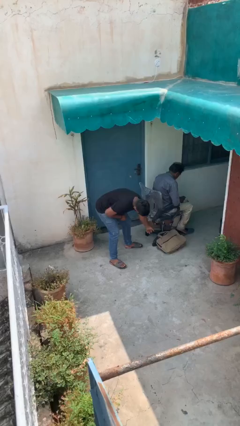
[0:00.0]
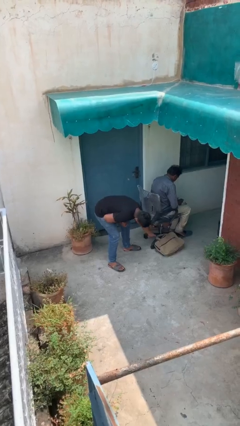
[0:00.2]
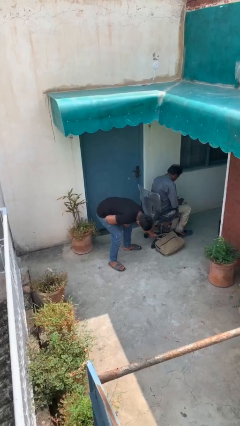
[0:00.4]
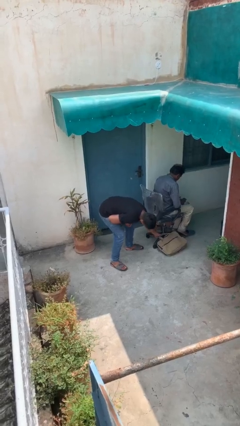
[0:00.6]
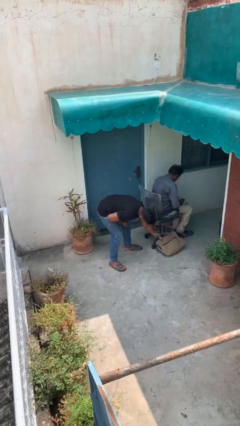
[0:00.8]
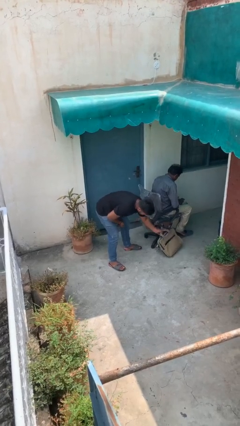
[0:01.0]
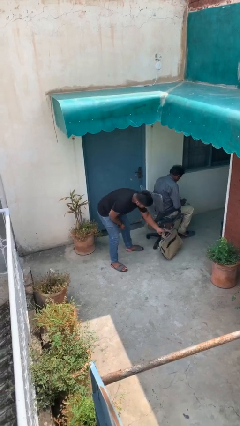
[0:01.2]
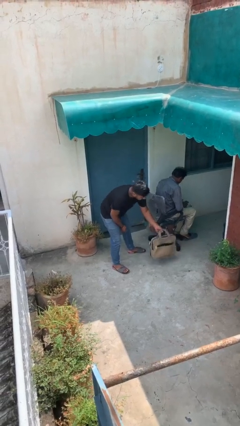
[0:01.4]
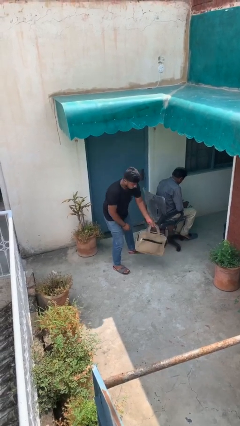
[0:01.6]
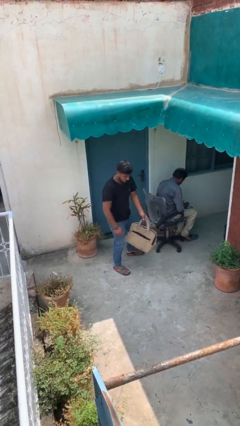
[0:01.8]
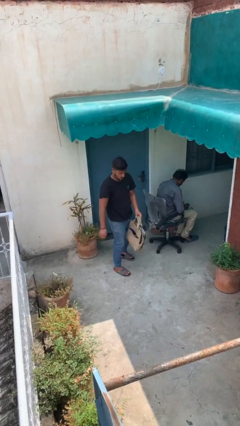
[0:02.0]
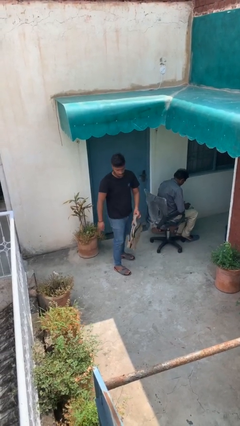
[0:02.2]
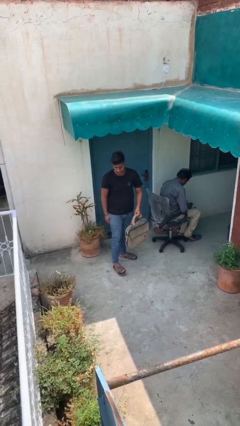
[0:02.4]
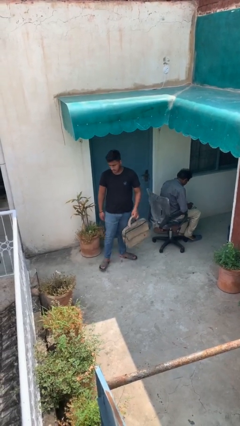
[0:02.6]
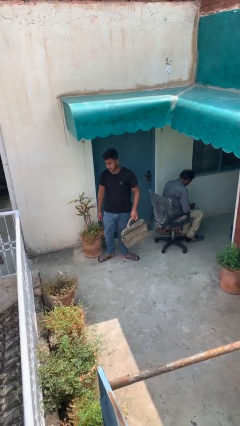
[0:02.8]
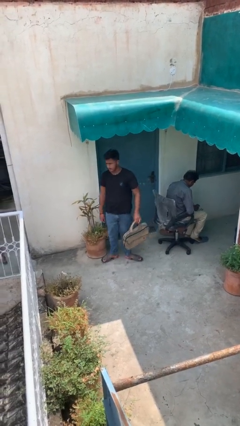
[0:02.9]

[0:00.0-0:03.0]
person steals object from person

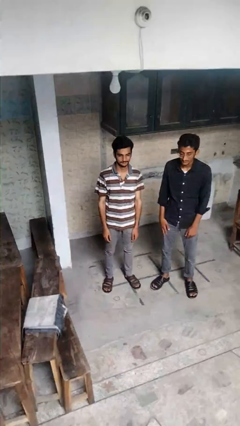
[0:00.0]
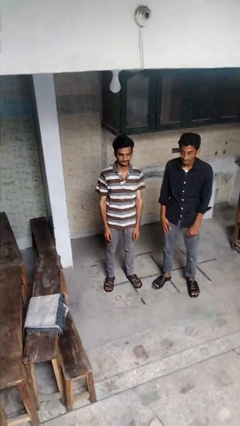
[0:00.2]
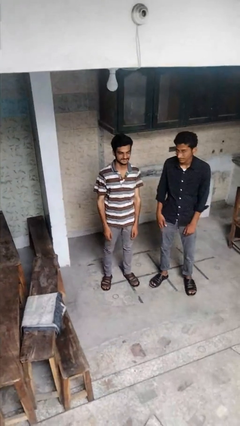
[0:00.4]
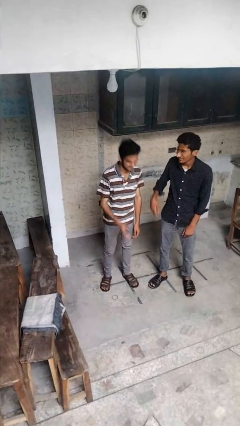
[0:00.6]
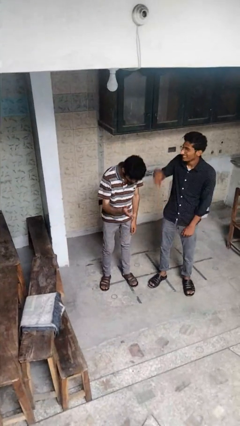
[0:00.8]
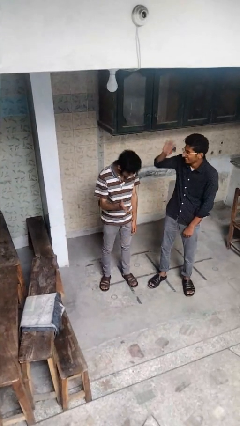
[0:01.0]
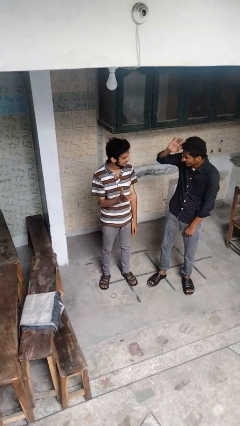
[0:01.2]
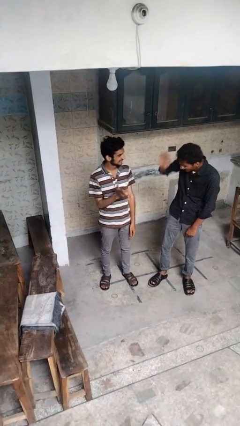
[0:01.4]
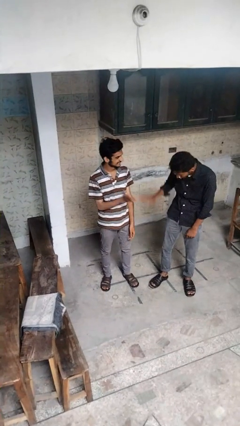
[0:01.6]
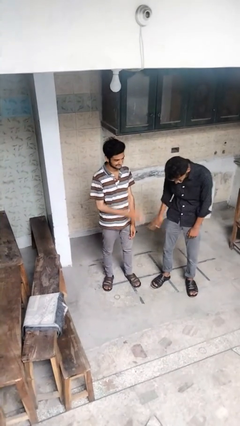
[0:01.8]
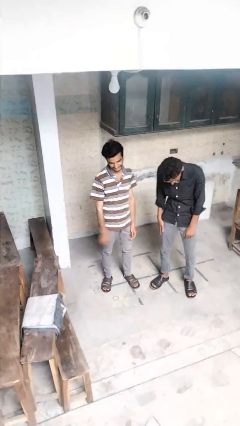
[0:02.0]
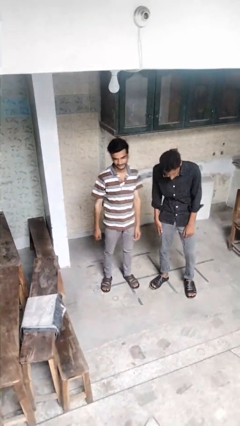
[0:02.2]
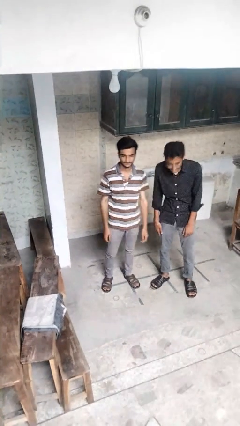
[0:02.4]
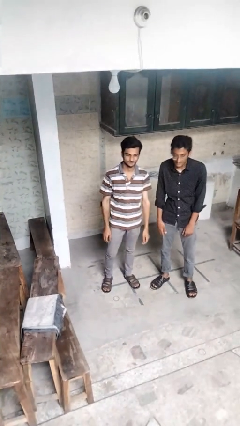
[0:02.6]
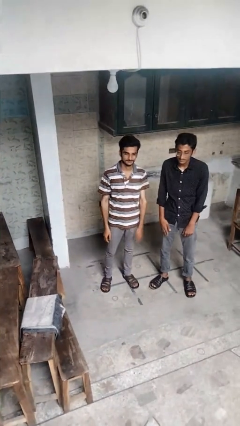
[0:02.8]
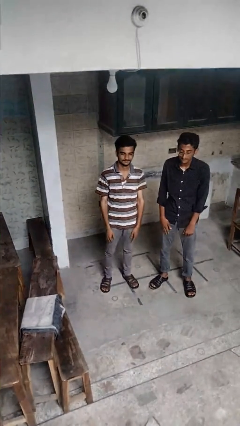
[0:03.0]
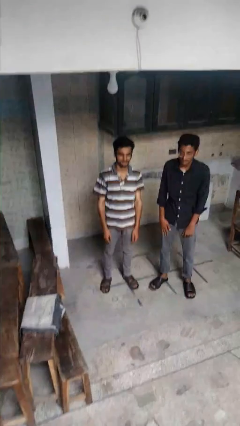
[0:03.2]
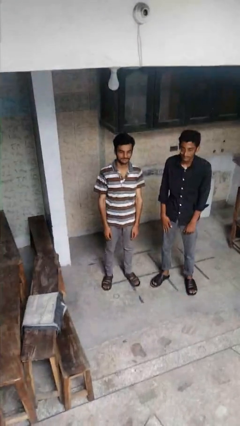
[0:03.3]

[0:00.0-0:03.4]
person laughs with person

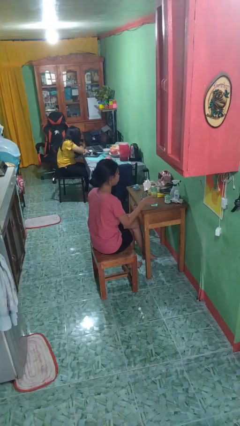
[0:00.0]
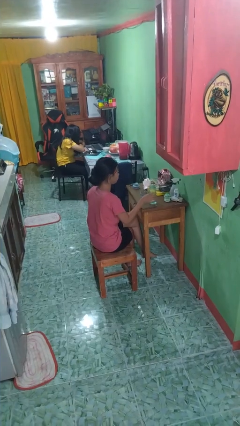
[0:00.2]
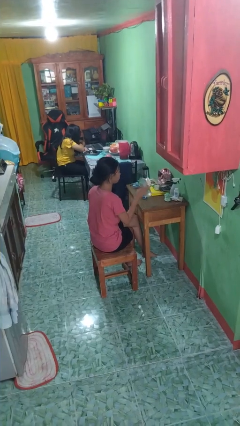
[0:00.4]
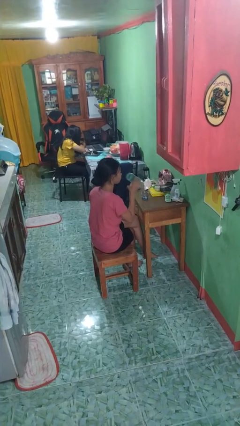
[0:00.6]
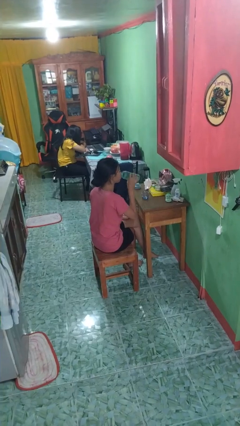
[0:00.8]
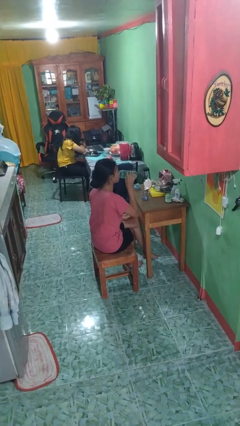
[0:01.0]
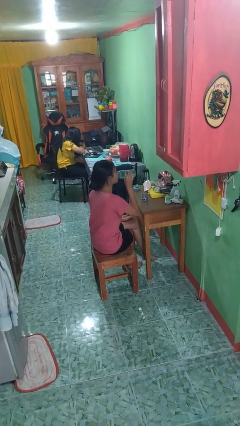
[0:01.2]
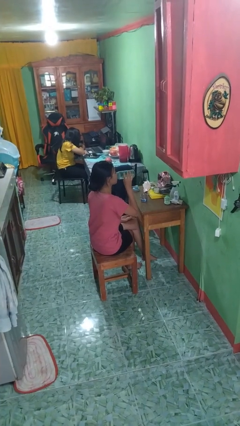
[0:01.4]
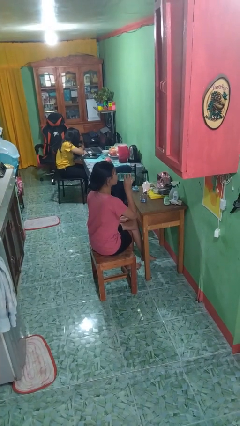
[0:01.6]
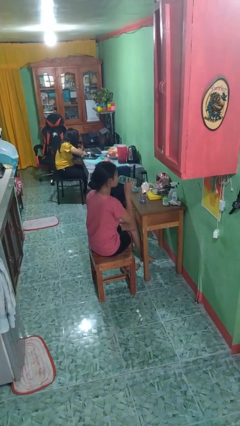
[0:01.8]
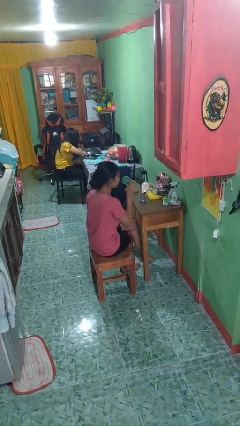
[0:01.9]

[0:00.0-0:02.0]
person drinks from cup

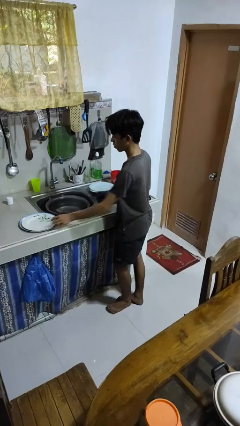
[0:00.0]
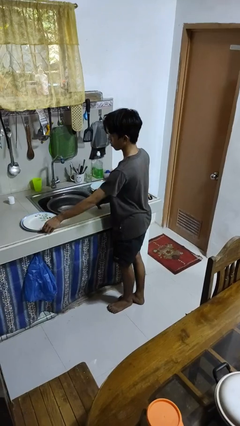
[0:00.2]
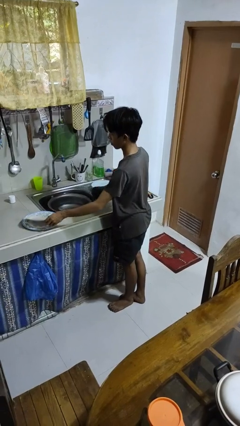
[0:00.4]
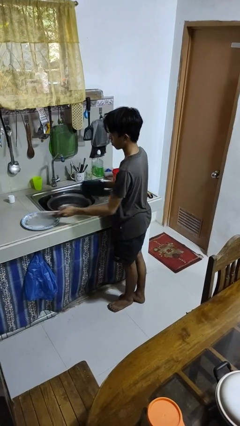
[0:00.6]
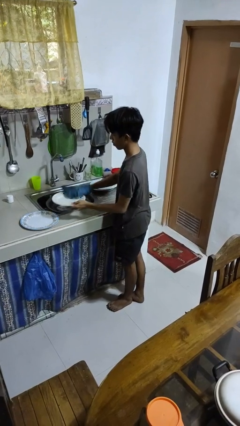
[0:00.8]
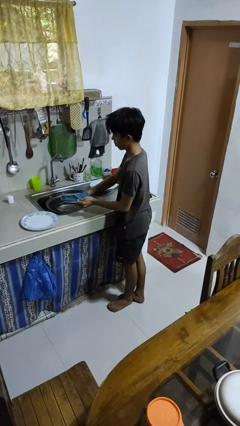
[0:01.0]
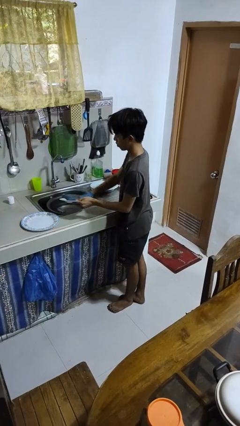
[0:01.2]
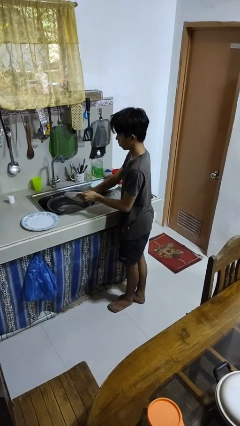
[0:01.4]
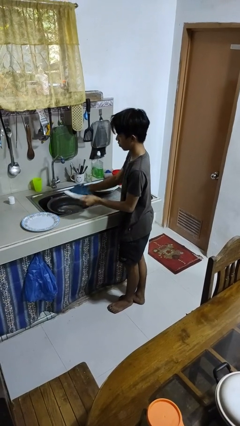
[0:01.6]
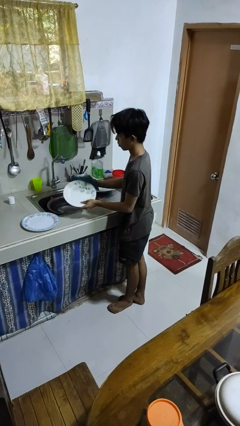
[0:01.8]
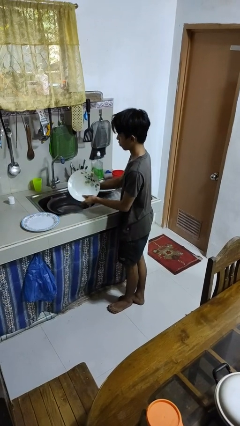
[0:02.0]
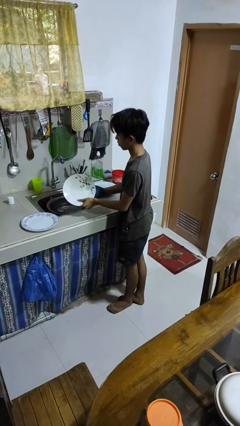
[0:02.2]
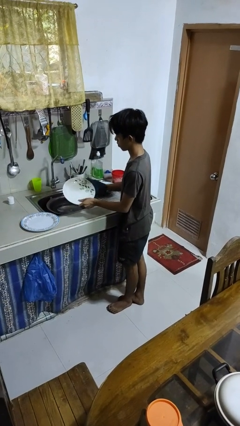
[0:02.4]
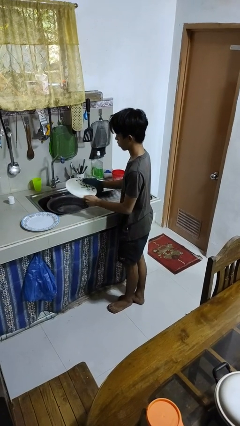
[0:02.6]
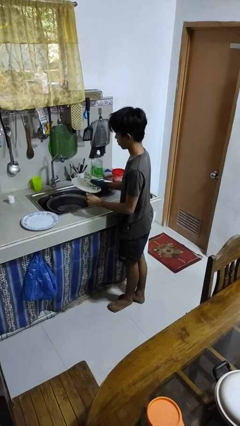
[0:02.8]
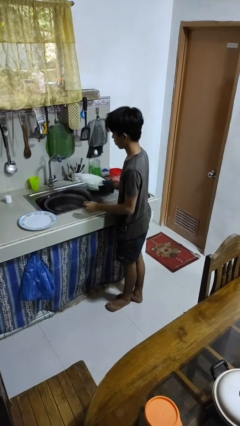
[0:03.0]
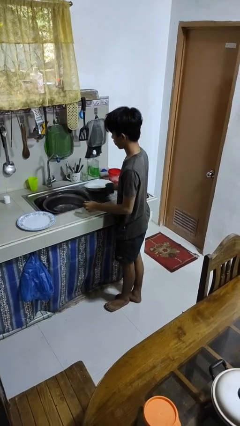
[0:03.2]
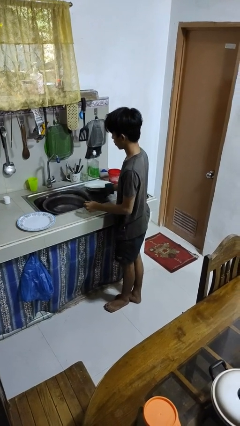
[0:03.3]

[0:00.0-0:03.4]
person dries dish

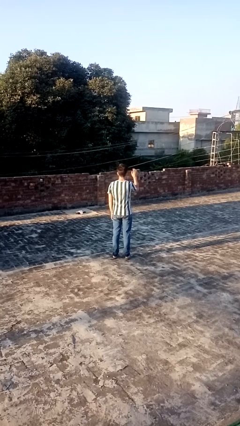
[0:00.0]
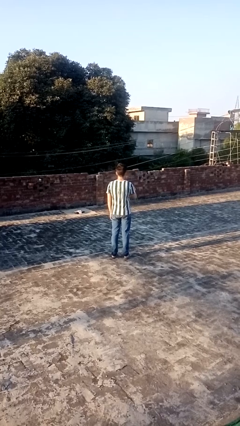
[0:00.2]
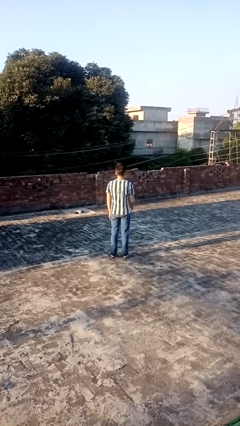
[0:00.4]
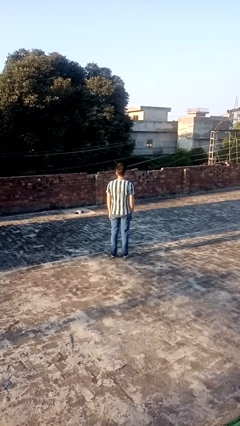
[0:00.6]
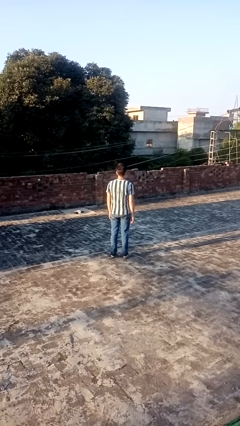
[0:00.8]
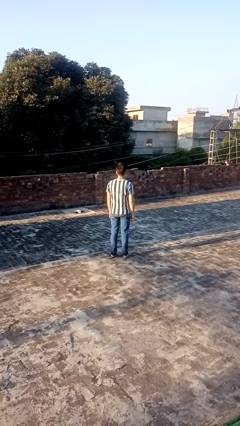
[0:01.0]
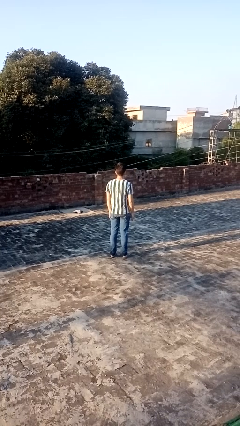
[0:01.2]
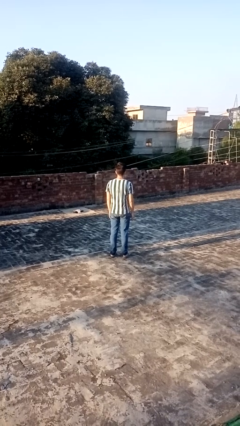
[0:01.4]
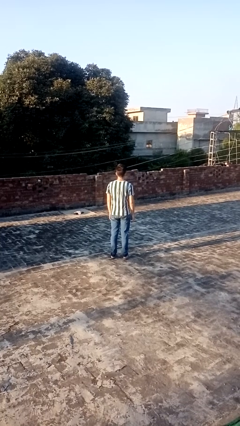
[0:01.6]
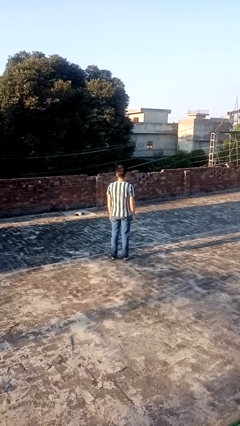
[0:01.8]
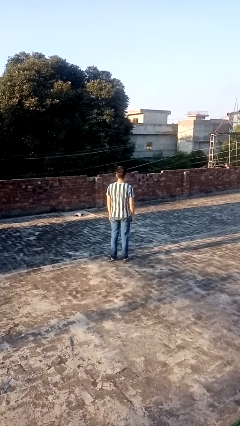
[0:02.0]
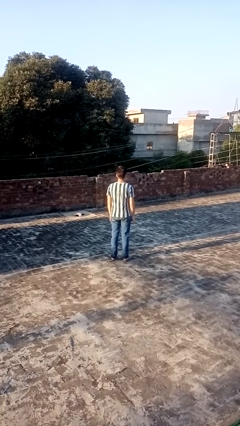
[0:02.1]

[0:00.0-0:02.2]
person gestures lower hand

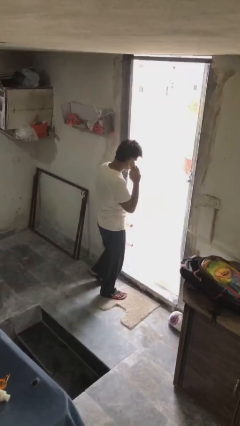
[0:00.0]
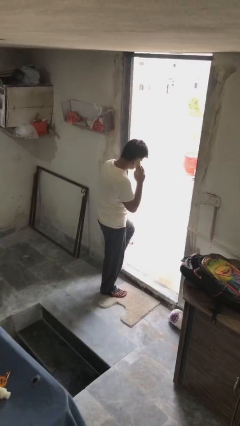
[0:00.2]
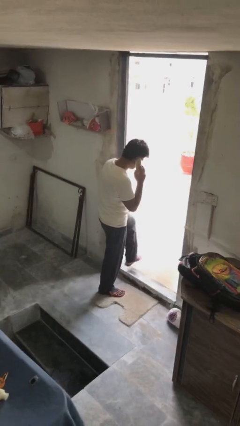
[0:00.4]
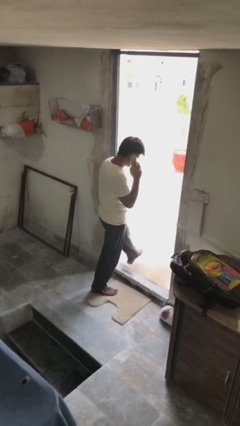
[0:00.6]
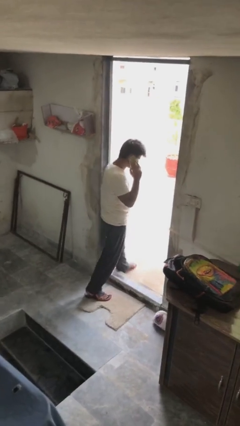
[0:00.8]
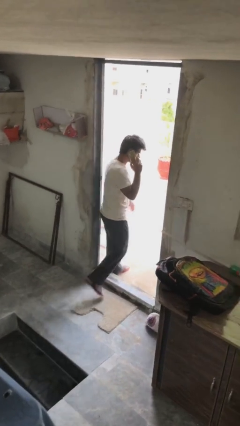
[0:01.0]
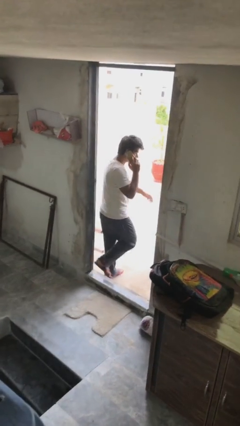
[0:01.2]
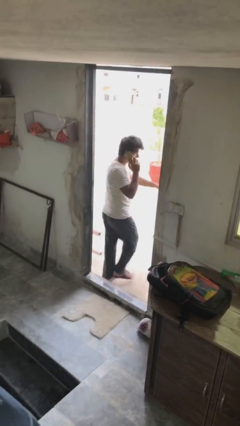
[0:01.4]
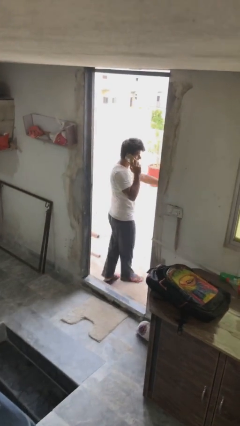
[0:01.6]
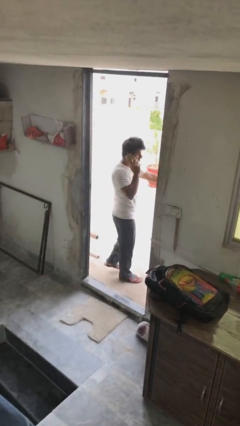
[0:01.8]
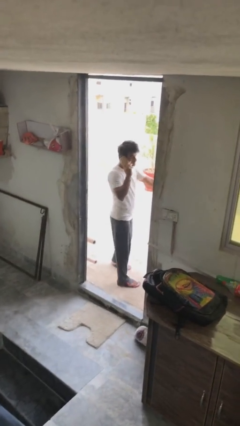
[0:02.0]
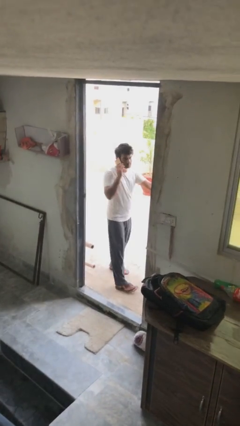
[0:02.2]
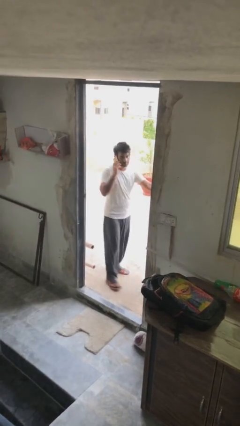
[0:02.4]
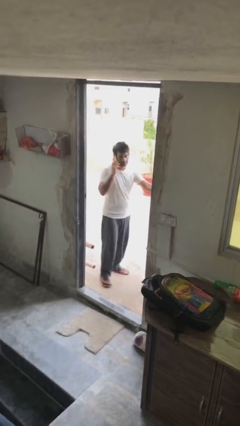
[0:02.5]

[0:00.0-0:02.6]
person enters scene through structure

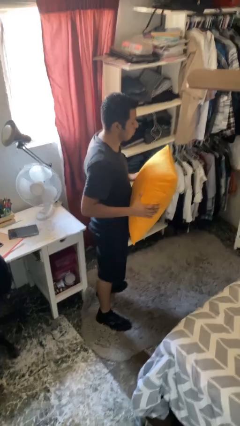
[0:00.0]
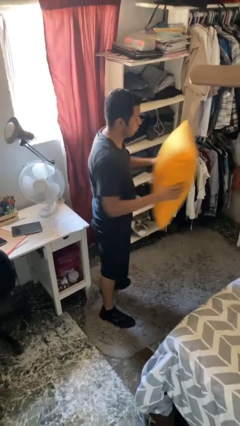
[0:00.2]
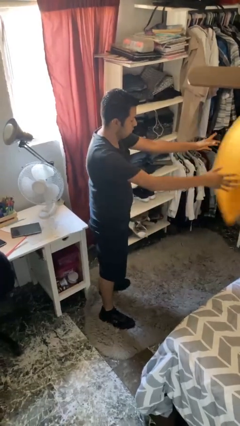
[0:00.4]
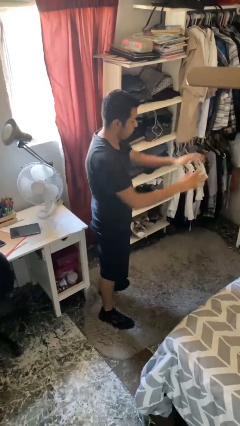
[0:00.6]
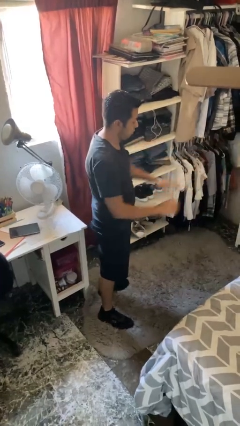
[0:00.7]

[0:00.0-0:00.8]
person throws object on bed
